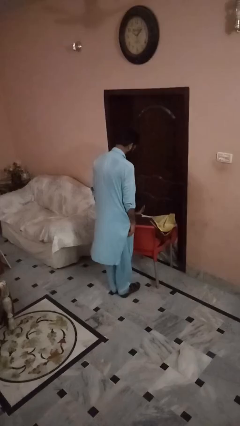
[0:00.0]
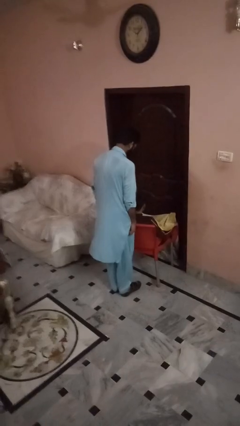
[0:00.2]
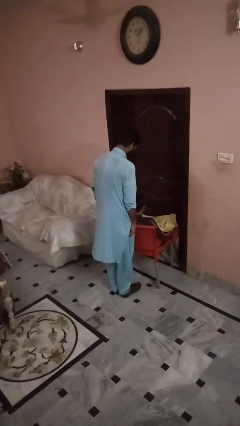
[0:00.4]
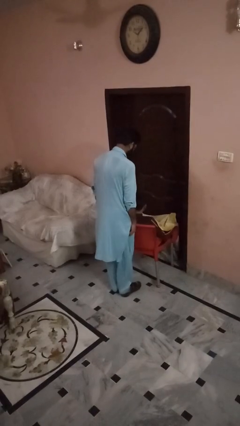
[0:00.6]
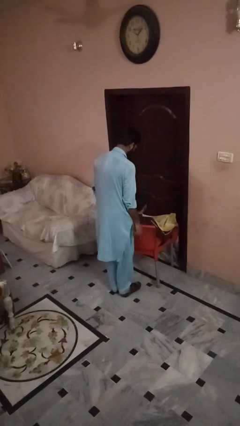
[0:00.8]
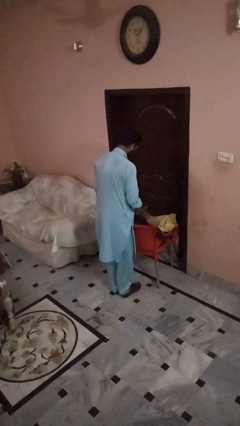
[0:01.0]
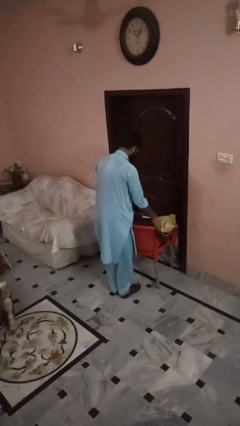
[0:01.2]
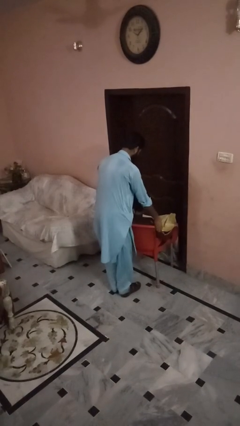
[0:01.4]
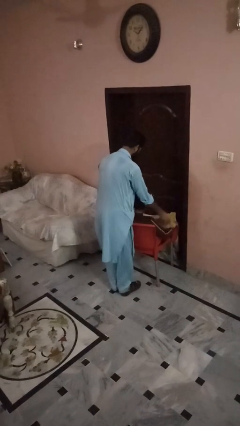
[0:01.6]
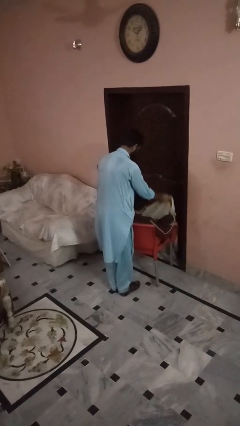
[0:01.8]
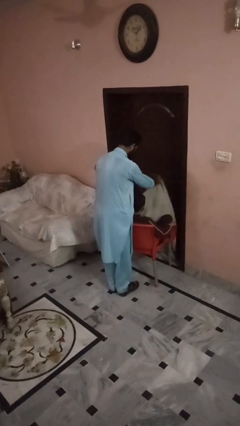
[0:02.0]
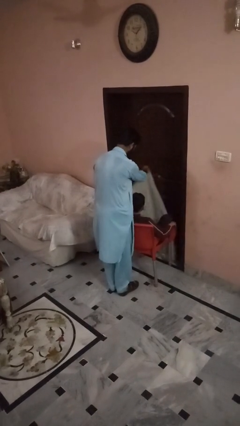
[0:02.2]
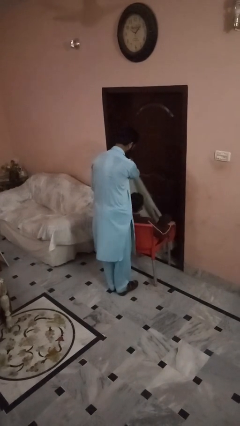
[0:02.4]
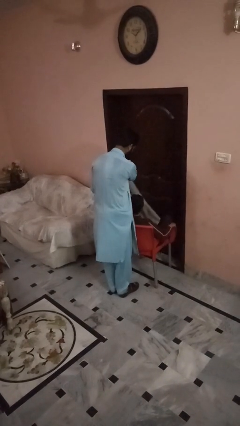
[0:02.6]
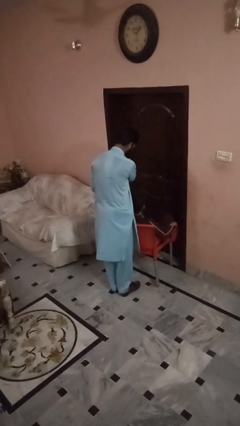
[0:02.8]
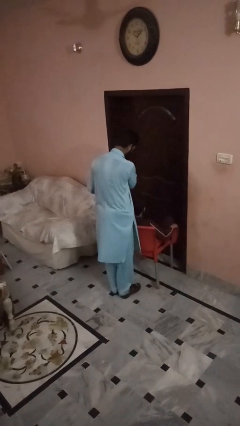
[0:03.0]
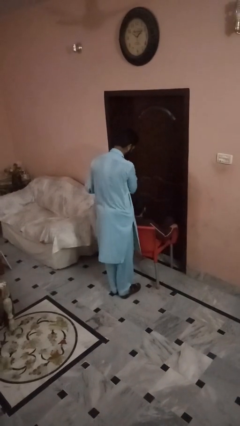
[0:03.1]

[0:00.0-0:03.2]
person uncovers friend with blanket

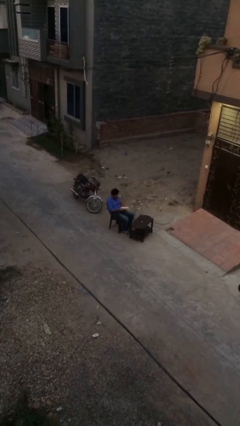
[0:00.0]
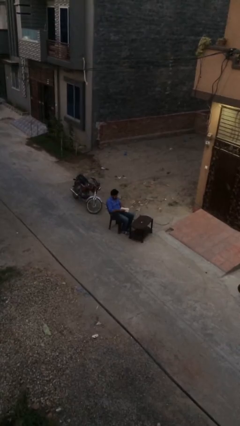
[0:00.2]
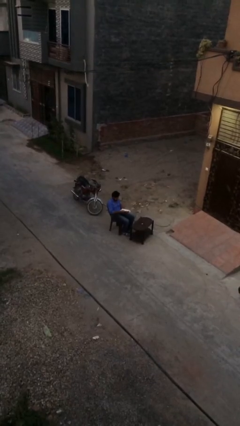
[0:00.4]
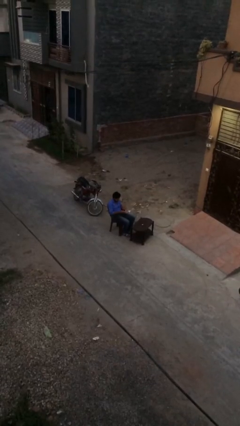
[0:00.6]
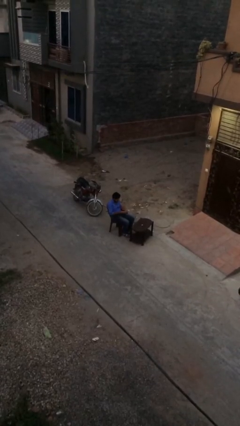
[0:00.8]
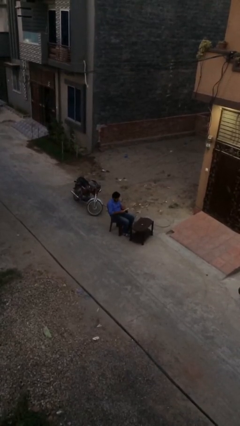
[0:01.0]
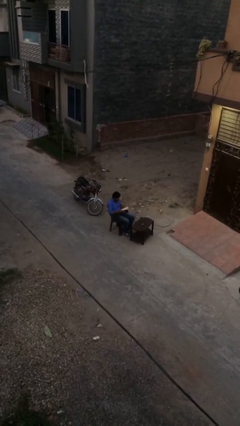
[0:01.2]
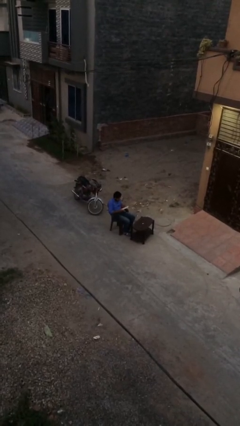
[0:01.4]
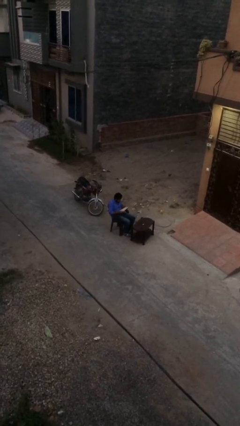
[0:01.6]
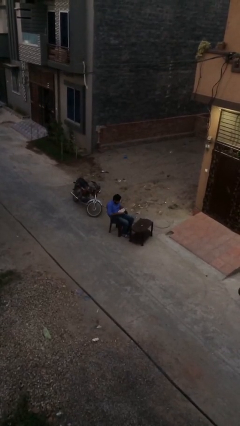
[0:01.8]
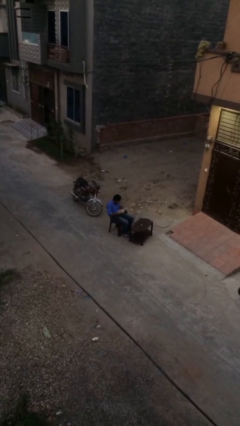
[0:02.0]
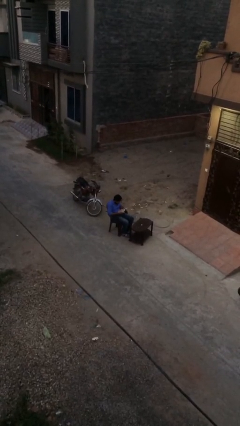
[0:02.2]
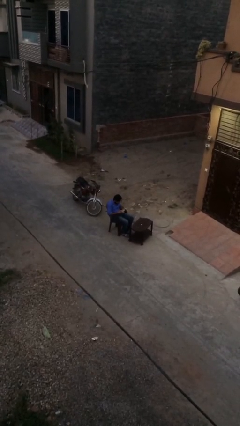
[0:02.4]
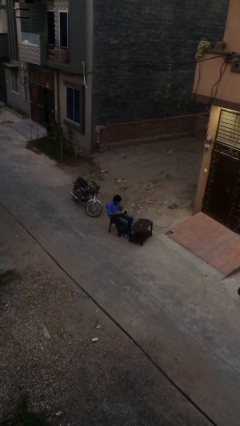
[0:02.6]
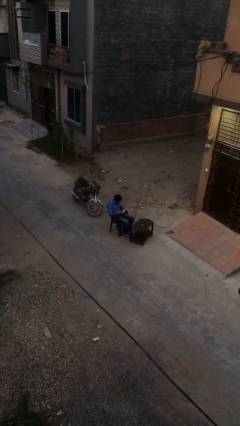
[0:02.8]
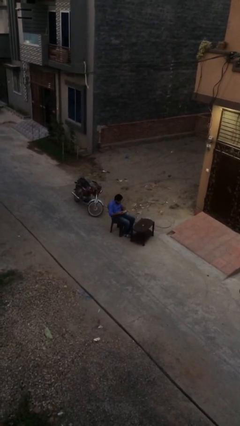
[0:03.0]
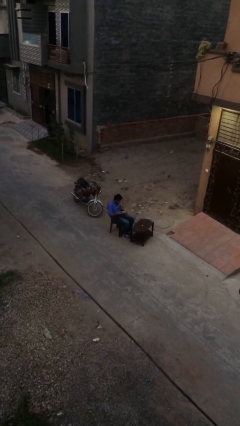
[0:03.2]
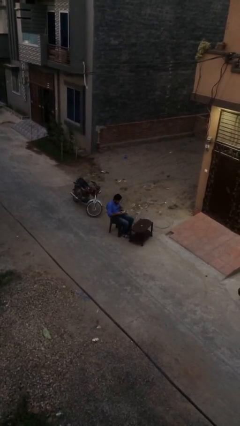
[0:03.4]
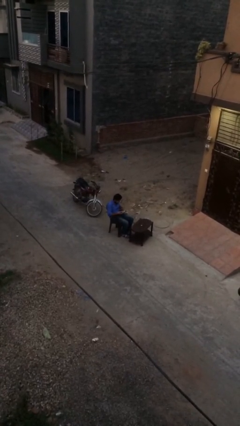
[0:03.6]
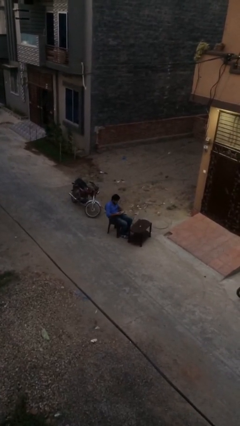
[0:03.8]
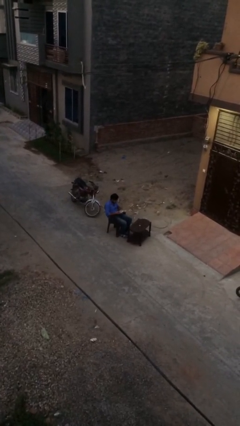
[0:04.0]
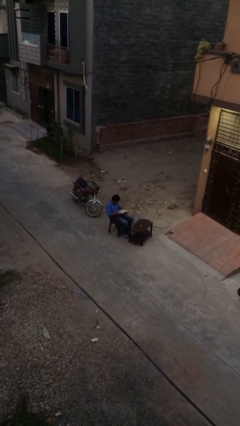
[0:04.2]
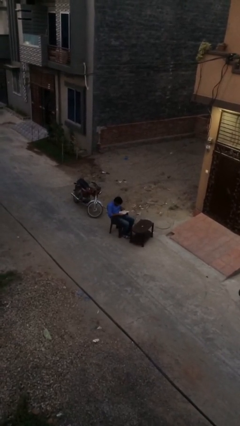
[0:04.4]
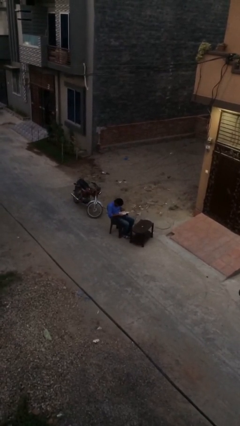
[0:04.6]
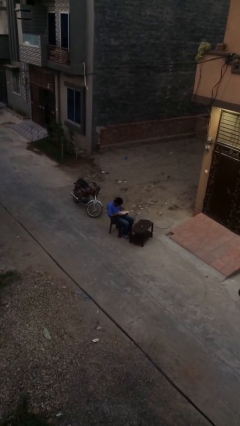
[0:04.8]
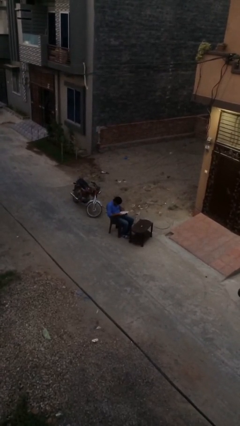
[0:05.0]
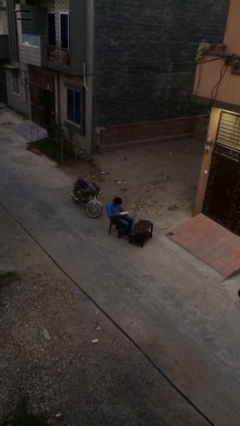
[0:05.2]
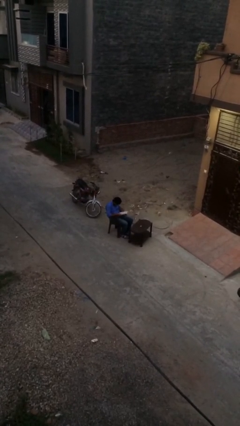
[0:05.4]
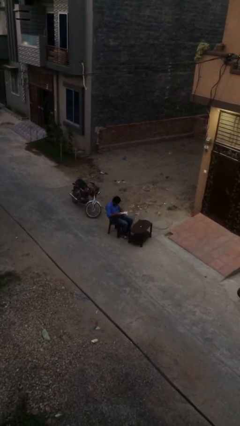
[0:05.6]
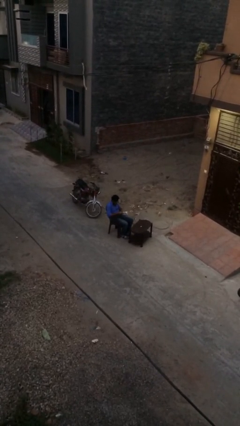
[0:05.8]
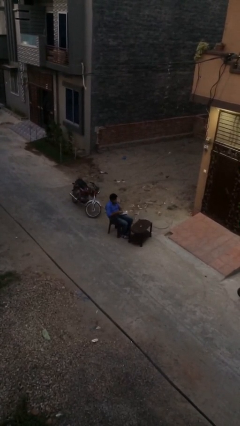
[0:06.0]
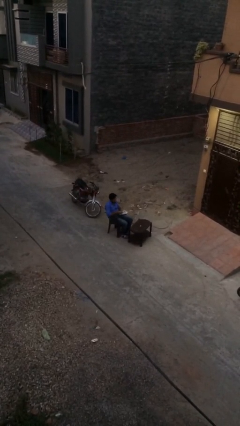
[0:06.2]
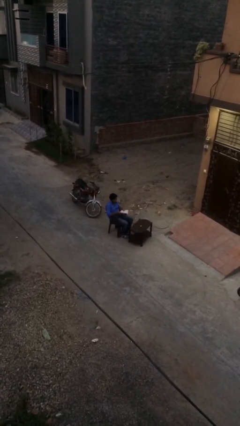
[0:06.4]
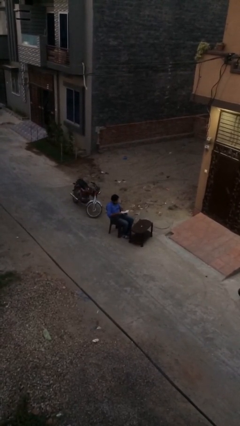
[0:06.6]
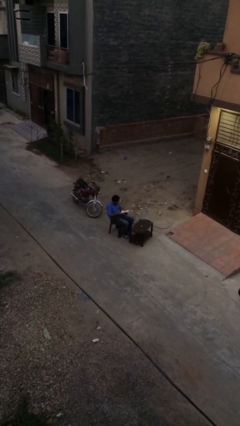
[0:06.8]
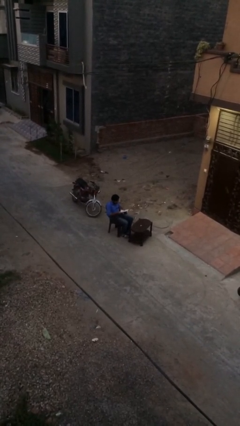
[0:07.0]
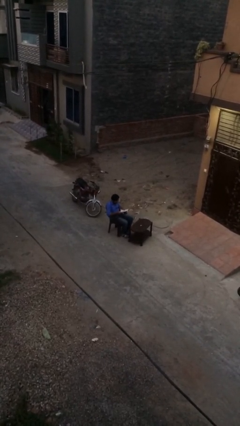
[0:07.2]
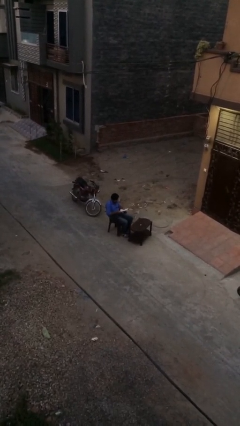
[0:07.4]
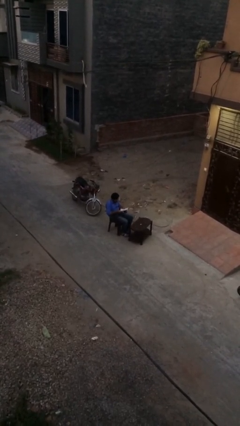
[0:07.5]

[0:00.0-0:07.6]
person reads document

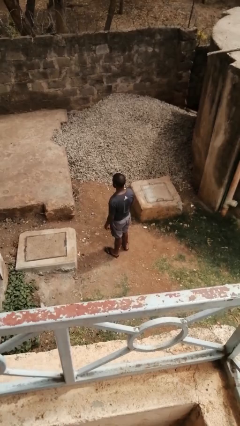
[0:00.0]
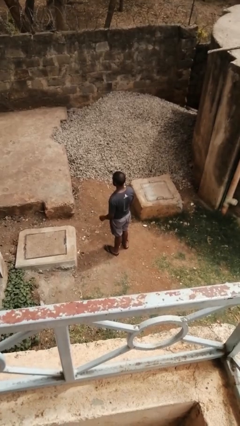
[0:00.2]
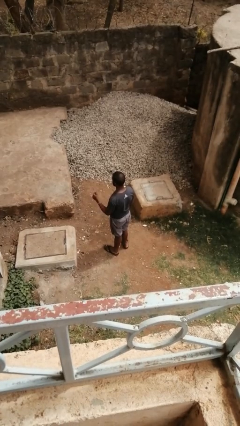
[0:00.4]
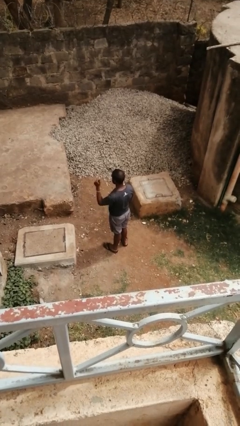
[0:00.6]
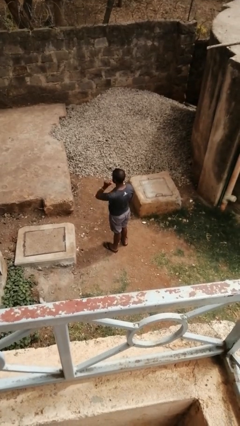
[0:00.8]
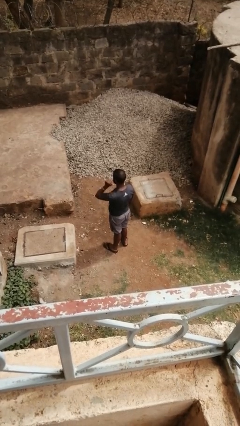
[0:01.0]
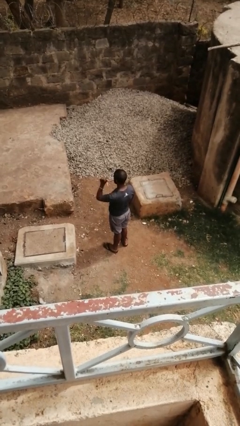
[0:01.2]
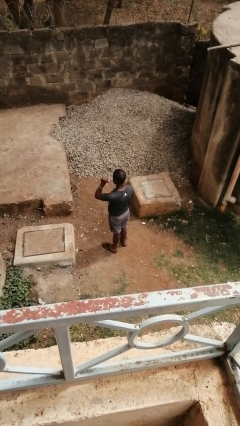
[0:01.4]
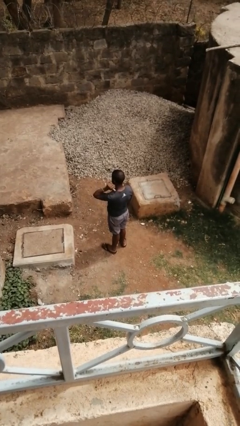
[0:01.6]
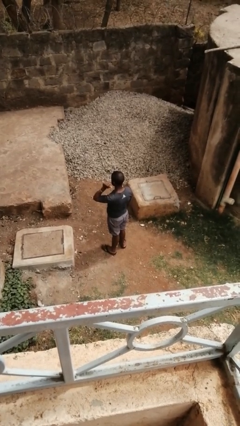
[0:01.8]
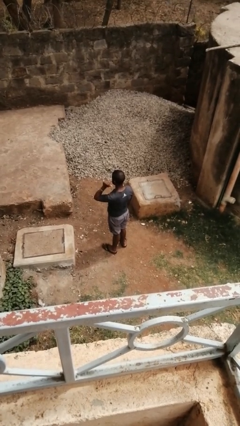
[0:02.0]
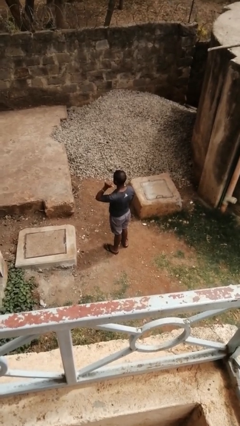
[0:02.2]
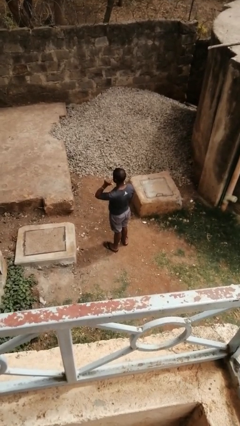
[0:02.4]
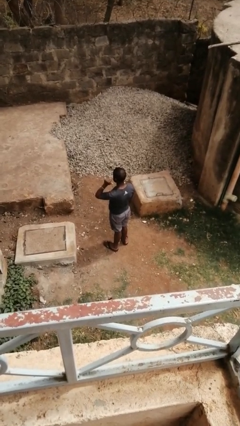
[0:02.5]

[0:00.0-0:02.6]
person gestures behind me

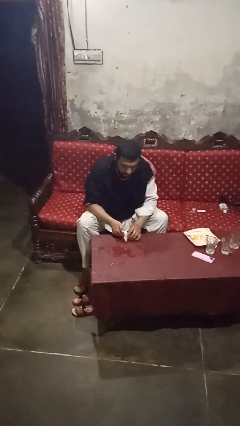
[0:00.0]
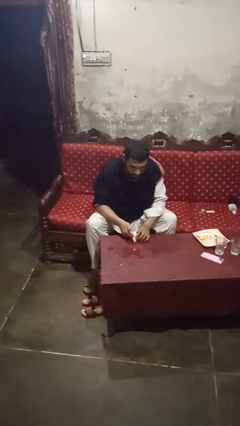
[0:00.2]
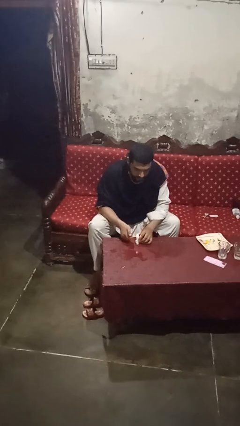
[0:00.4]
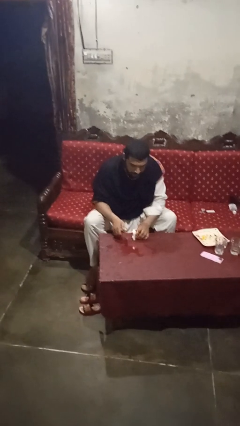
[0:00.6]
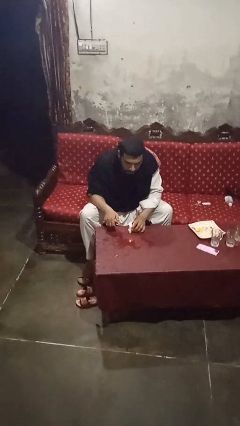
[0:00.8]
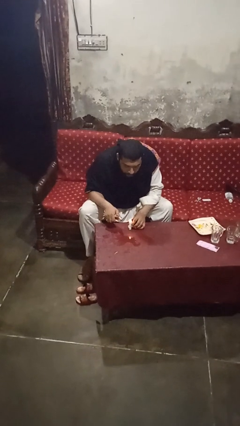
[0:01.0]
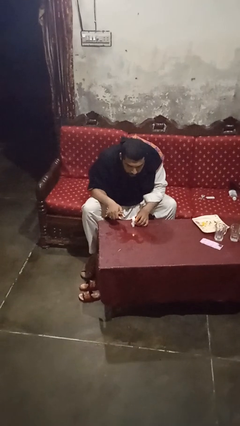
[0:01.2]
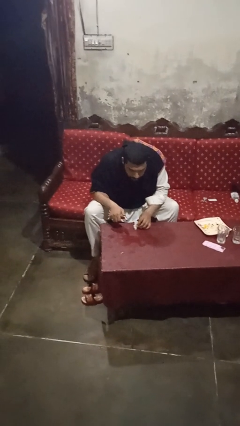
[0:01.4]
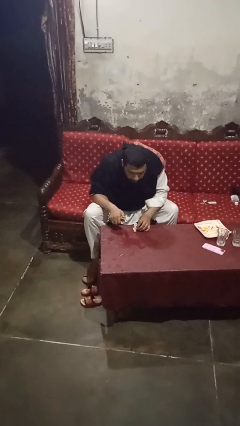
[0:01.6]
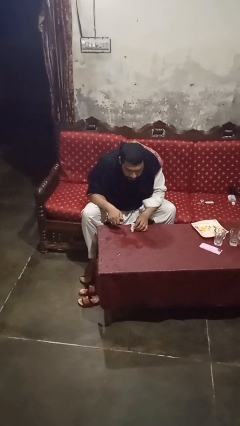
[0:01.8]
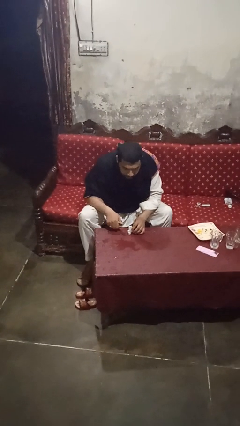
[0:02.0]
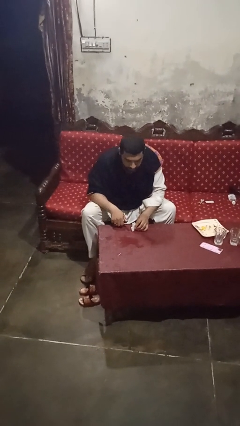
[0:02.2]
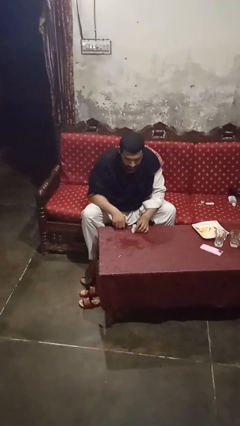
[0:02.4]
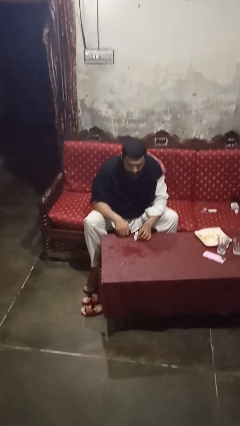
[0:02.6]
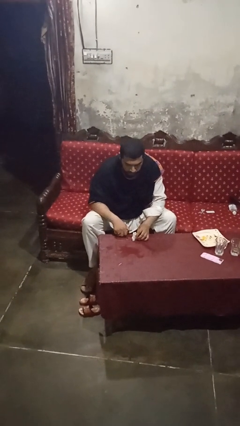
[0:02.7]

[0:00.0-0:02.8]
person extinguishes candle

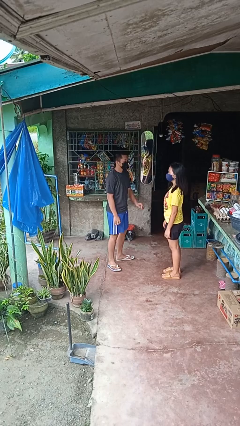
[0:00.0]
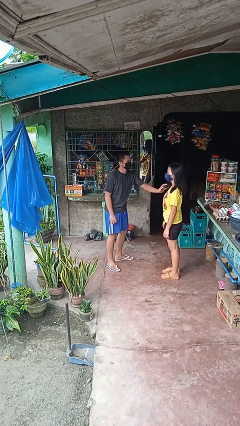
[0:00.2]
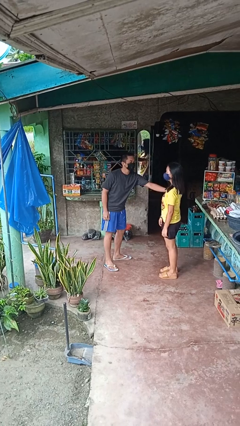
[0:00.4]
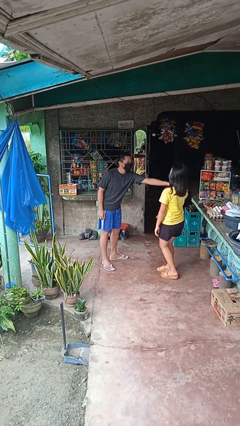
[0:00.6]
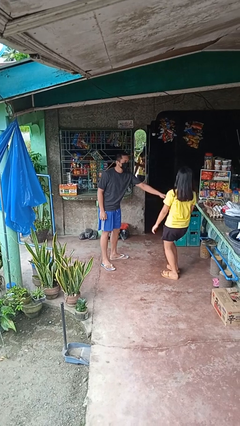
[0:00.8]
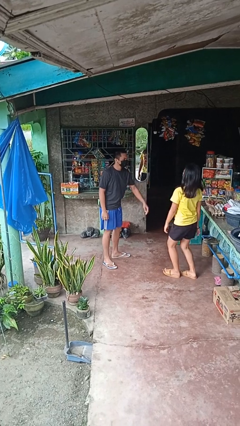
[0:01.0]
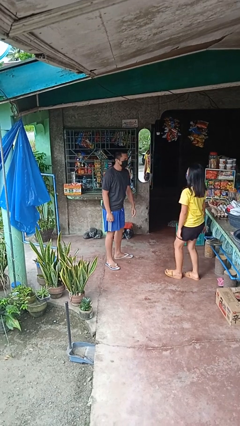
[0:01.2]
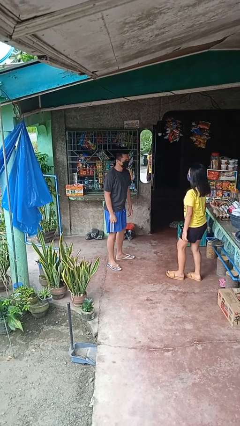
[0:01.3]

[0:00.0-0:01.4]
person shoves person
